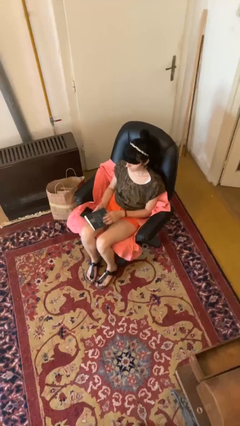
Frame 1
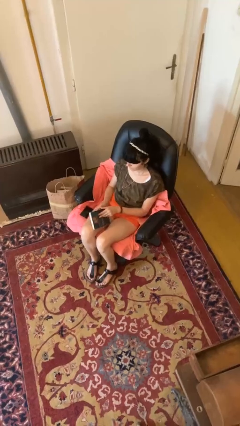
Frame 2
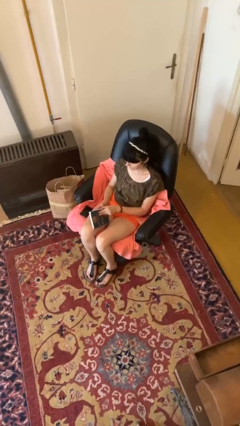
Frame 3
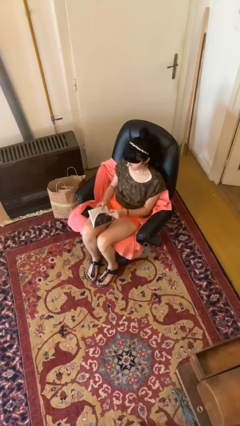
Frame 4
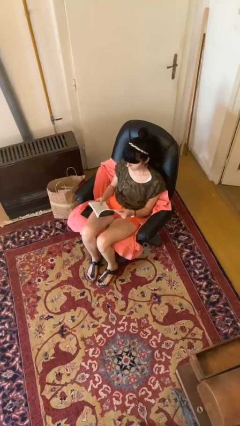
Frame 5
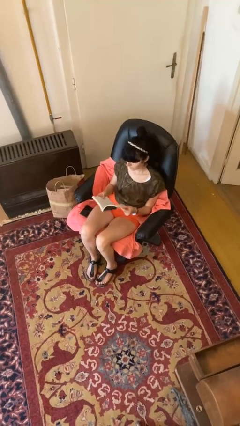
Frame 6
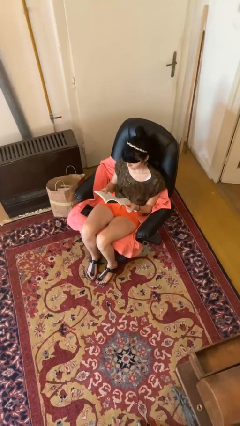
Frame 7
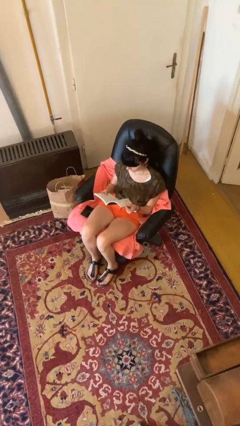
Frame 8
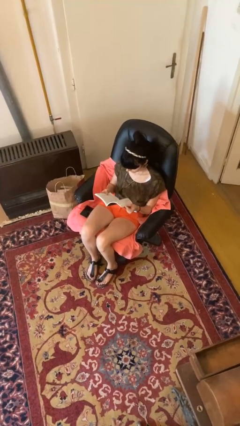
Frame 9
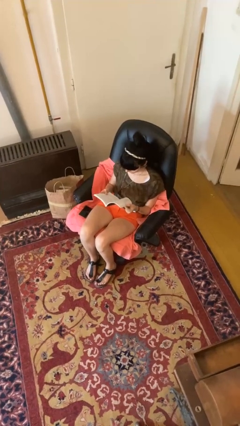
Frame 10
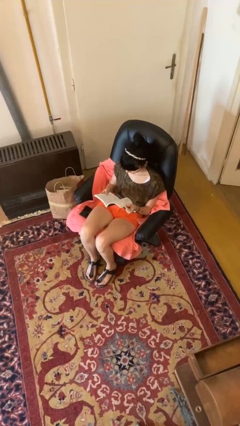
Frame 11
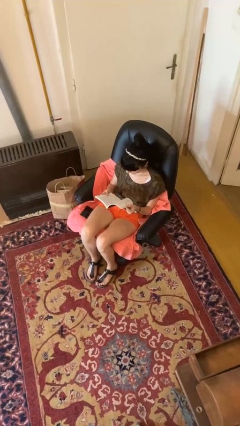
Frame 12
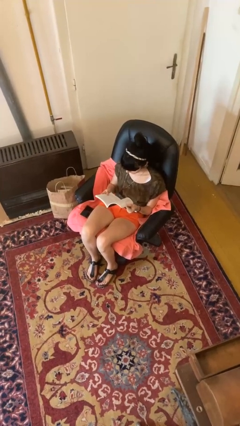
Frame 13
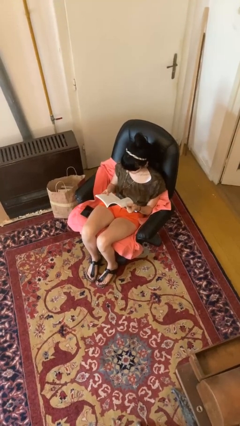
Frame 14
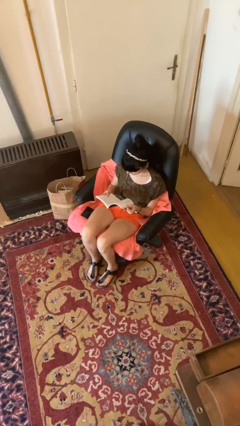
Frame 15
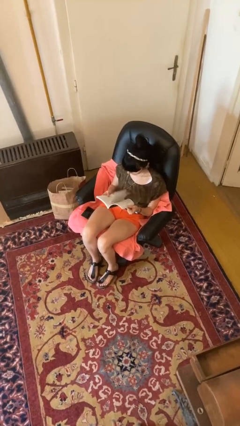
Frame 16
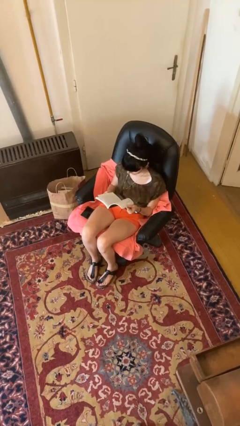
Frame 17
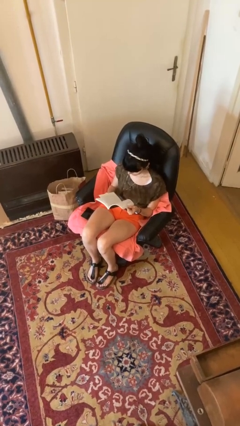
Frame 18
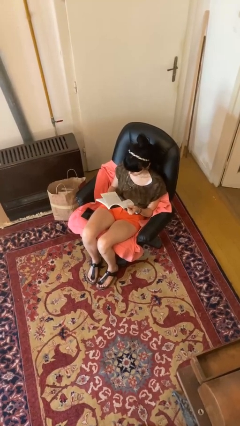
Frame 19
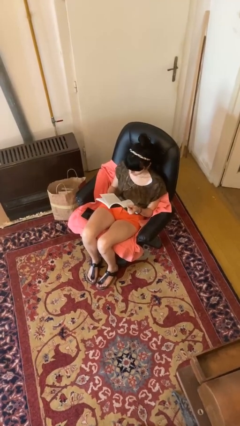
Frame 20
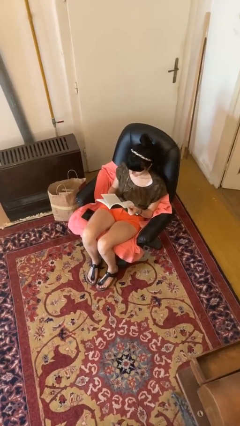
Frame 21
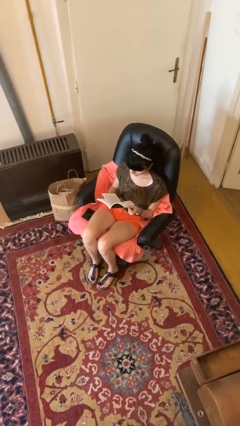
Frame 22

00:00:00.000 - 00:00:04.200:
person reads book

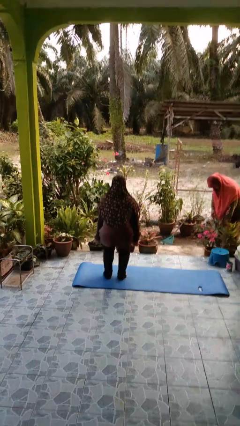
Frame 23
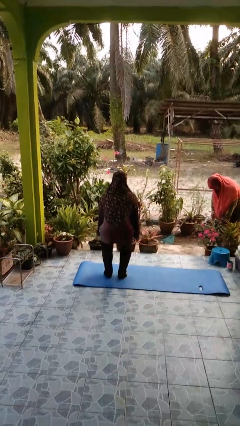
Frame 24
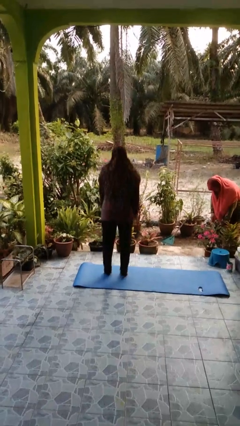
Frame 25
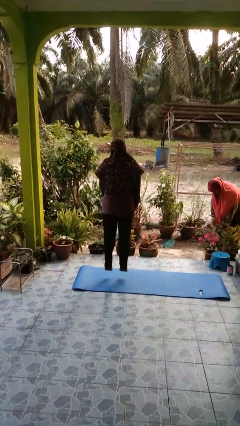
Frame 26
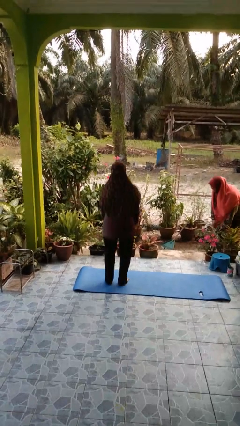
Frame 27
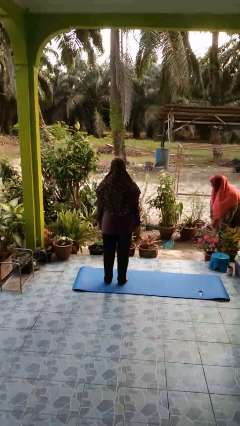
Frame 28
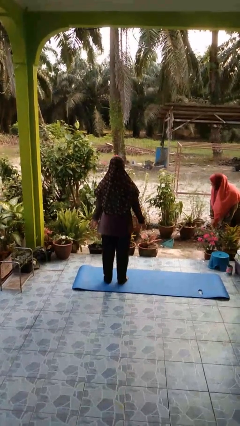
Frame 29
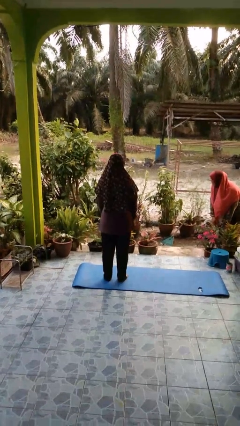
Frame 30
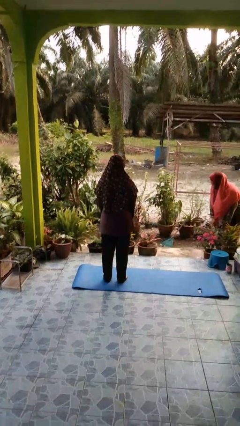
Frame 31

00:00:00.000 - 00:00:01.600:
person jumps

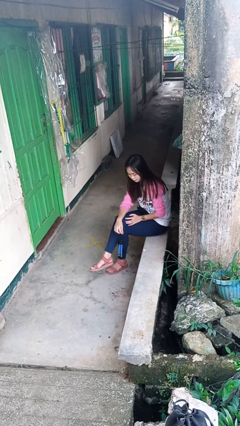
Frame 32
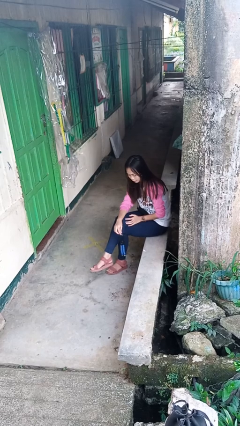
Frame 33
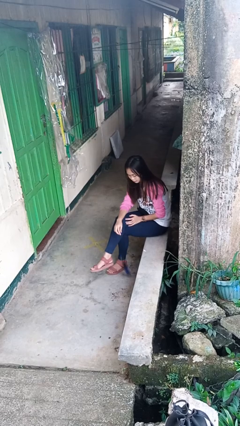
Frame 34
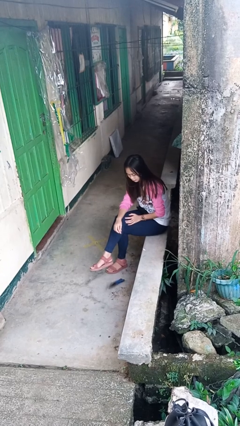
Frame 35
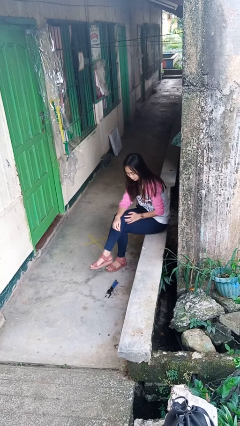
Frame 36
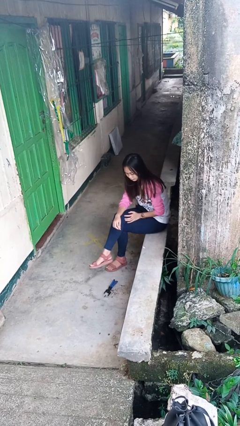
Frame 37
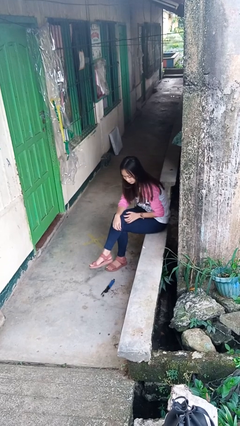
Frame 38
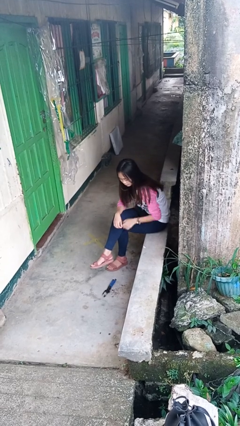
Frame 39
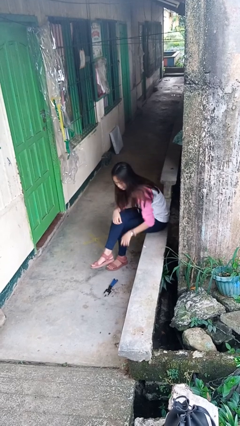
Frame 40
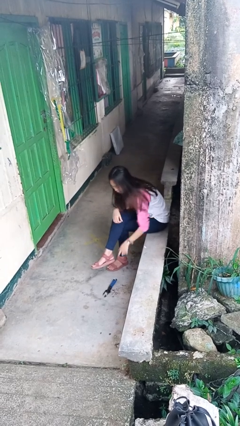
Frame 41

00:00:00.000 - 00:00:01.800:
person drops object

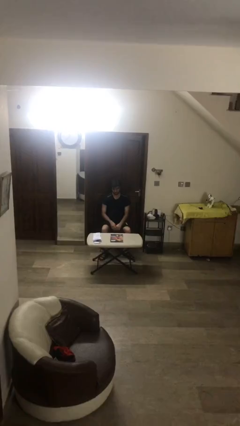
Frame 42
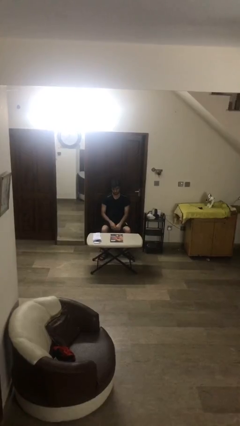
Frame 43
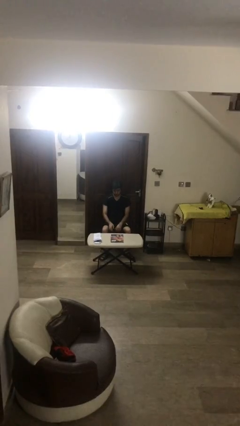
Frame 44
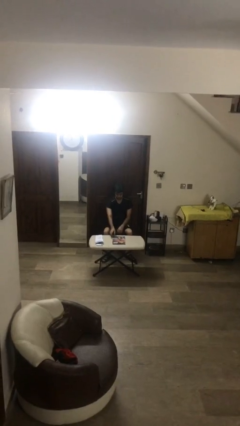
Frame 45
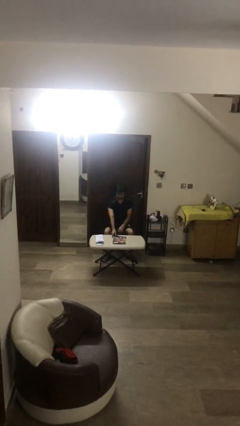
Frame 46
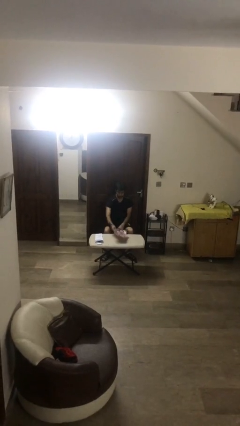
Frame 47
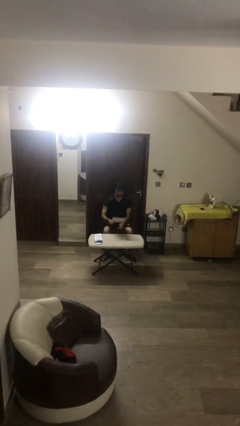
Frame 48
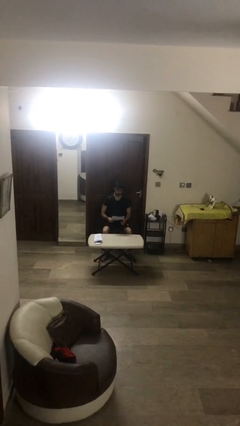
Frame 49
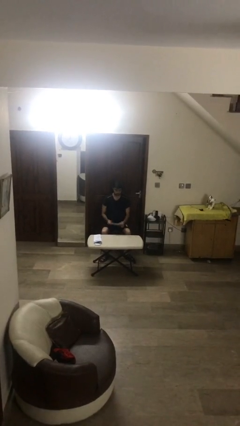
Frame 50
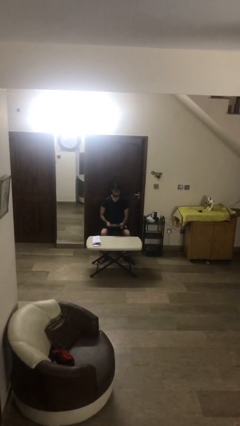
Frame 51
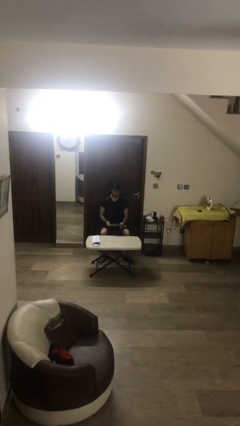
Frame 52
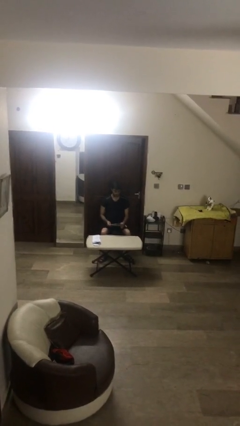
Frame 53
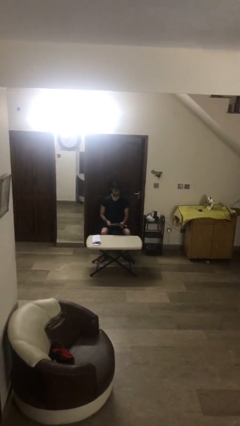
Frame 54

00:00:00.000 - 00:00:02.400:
person picks up object from table

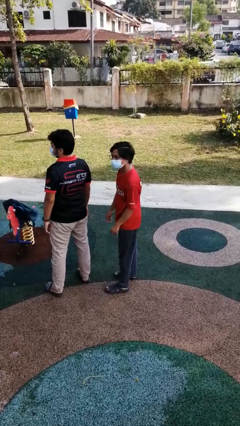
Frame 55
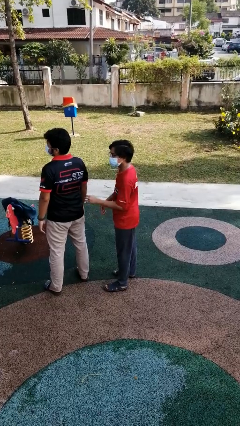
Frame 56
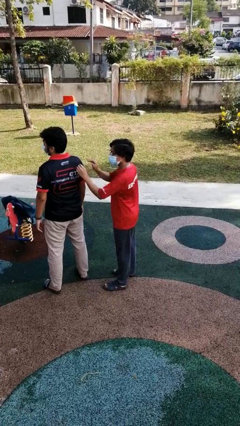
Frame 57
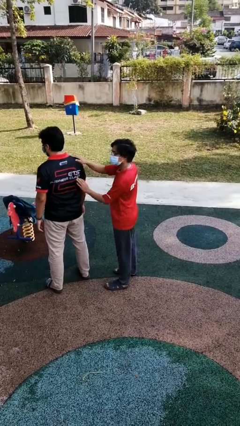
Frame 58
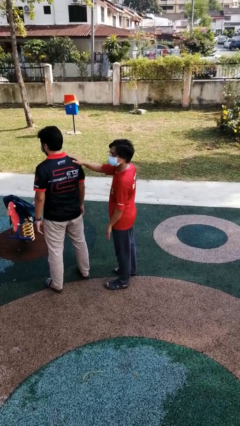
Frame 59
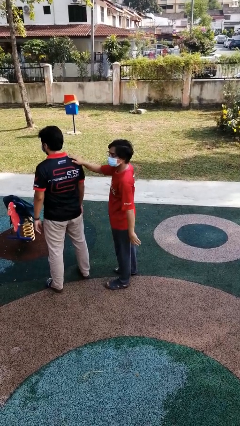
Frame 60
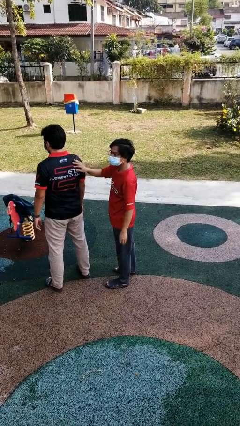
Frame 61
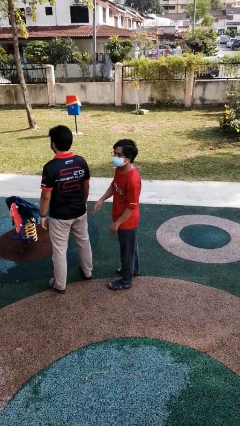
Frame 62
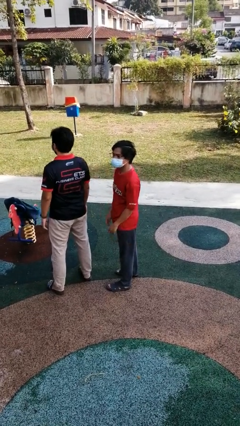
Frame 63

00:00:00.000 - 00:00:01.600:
person touches back of person

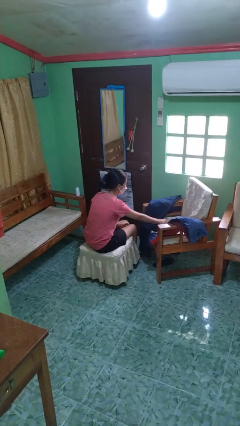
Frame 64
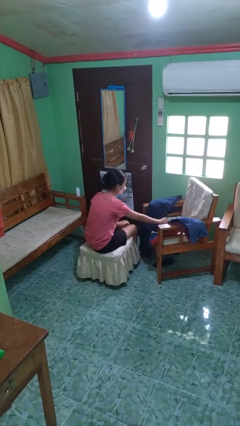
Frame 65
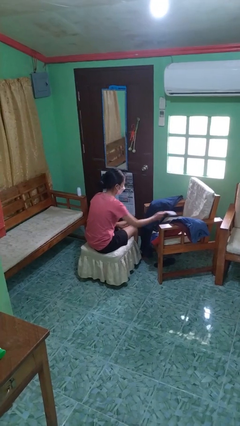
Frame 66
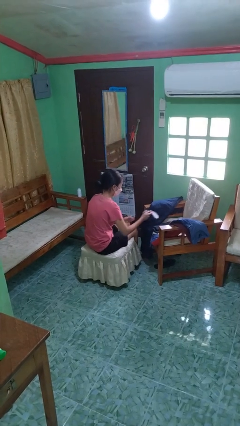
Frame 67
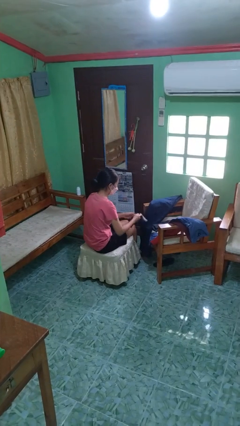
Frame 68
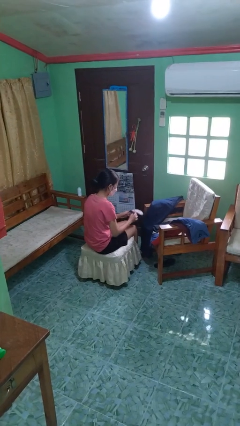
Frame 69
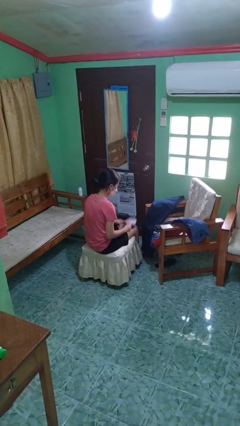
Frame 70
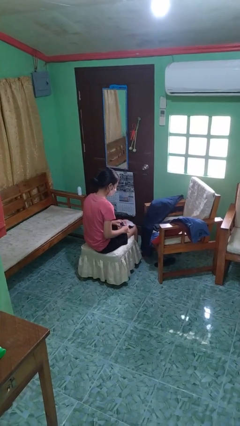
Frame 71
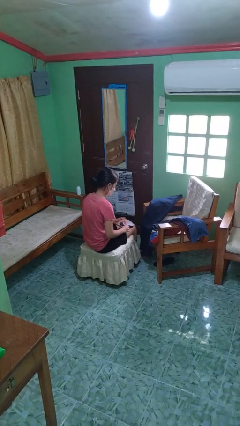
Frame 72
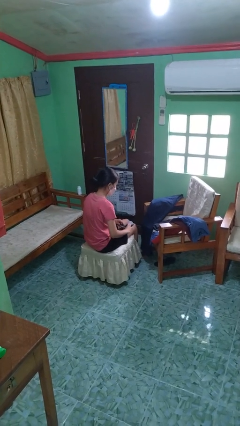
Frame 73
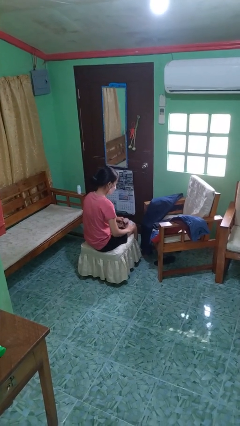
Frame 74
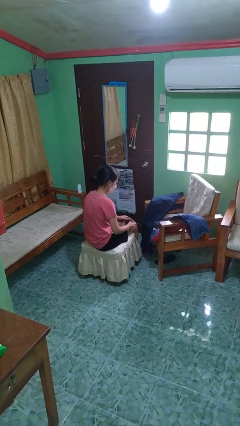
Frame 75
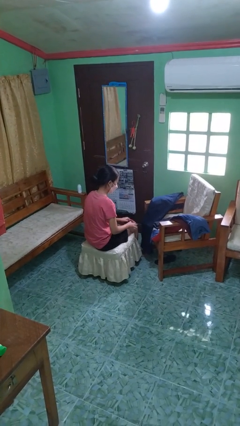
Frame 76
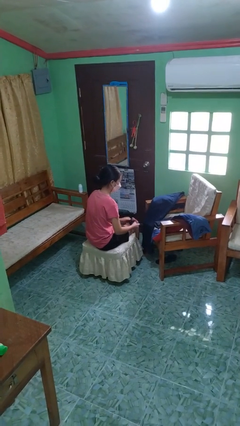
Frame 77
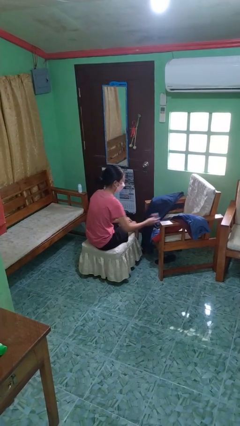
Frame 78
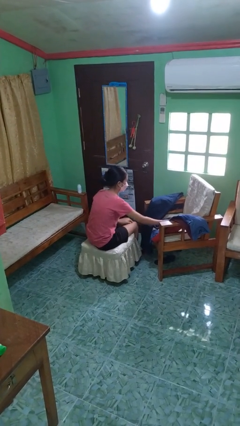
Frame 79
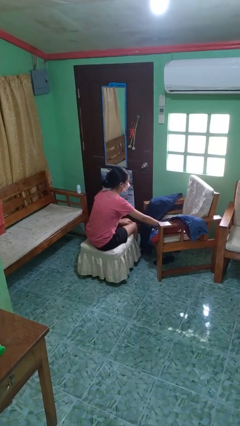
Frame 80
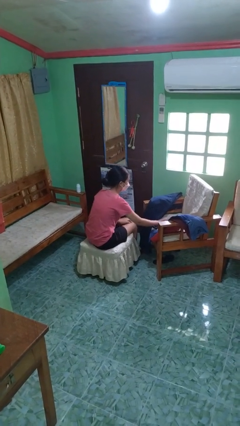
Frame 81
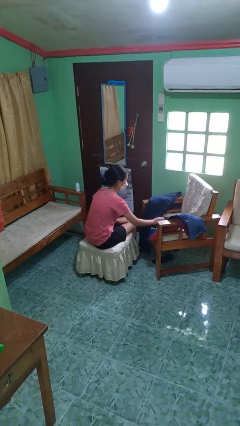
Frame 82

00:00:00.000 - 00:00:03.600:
person folds socks

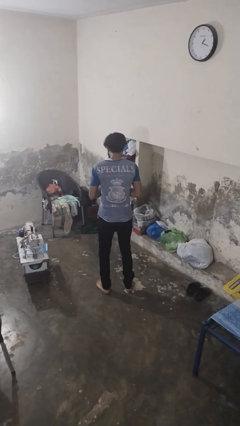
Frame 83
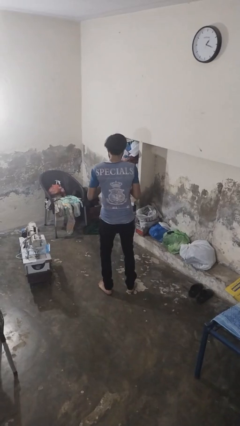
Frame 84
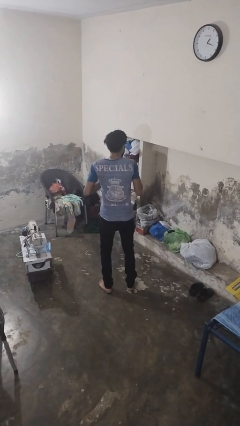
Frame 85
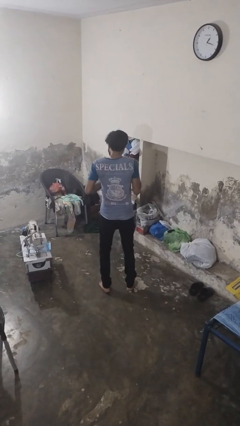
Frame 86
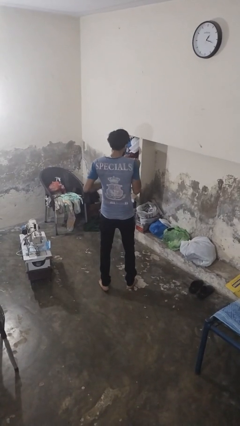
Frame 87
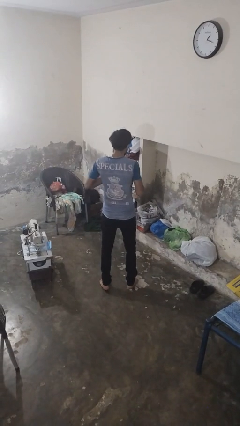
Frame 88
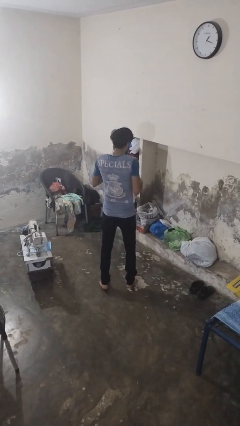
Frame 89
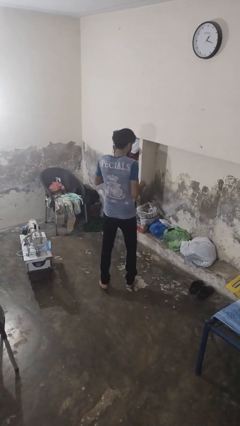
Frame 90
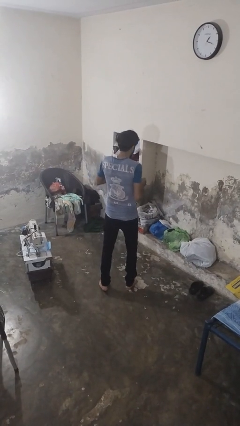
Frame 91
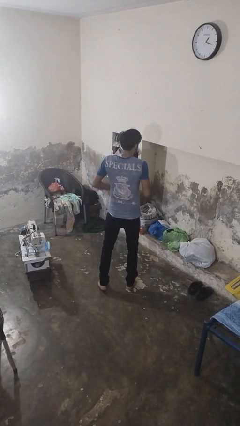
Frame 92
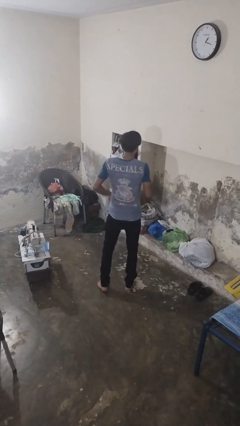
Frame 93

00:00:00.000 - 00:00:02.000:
person dances in place

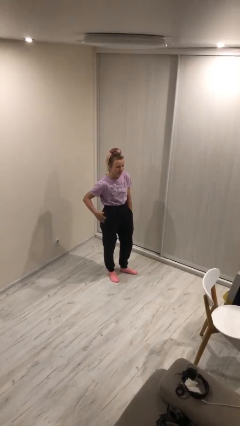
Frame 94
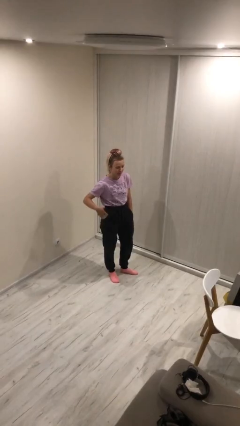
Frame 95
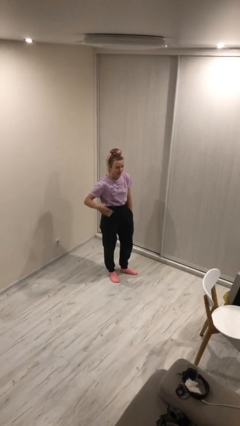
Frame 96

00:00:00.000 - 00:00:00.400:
person takes phone from pocket
